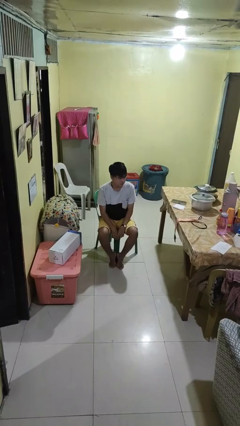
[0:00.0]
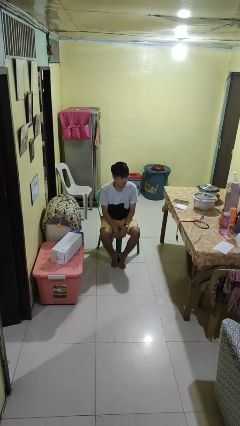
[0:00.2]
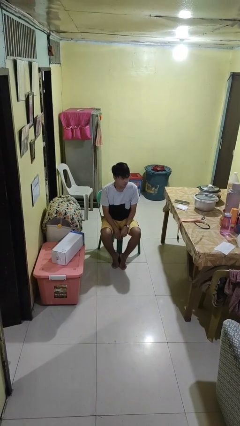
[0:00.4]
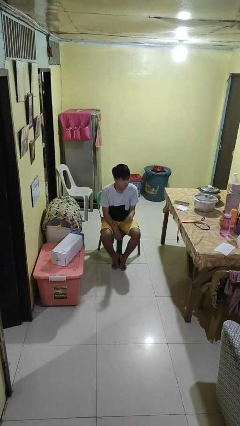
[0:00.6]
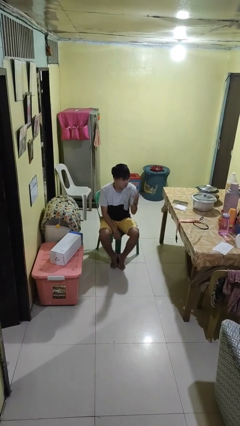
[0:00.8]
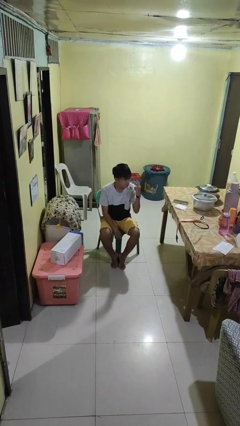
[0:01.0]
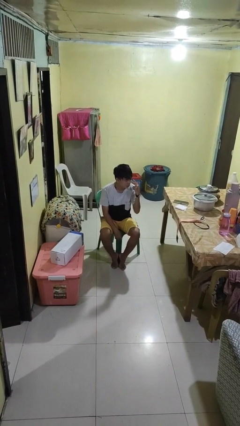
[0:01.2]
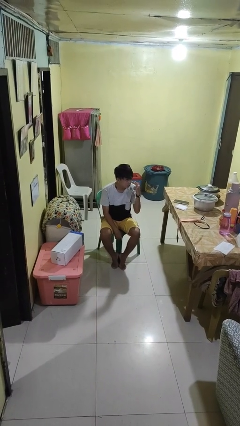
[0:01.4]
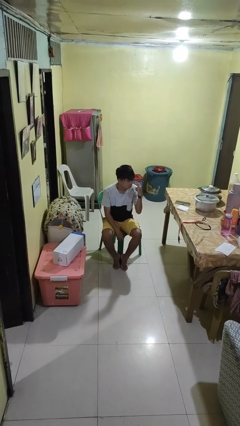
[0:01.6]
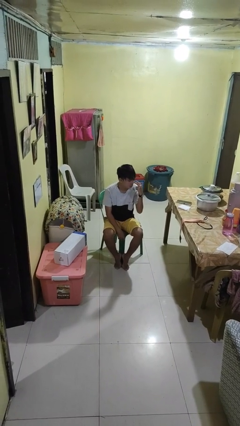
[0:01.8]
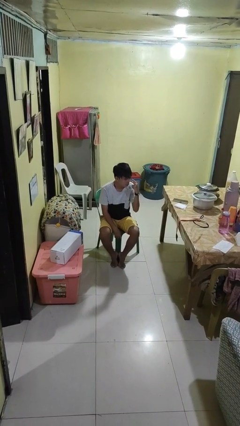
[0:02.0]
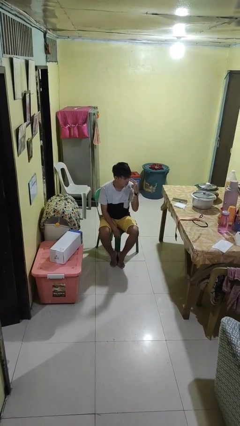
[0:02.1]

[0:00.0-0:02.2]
person gestures watch closely

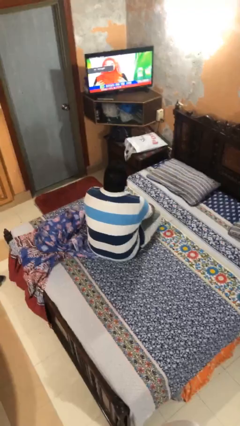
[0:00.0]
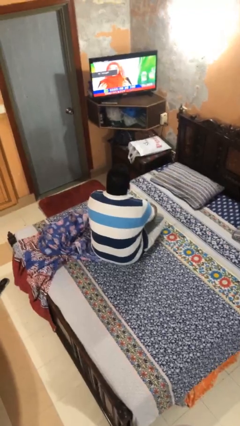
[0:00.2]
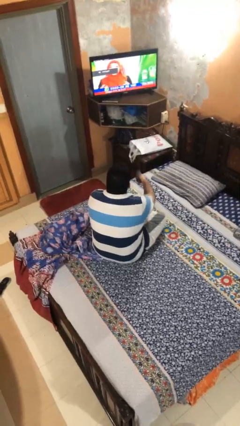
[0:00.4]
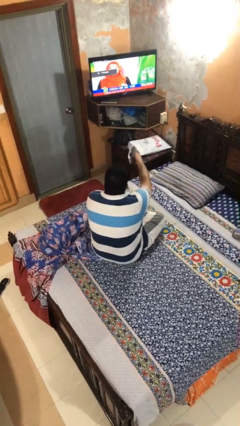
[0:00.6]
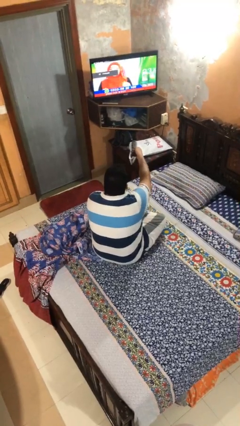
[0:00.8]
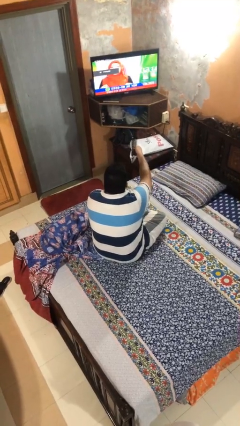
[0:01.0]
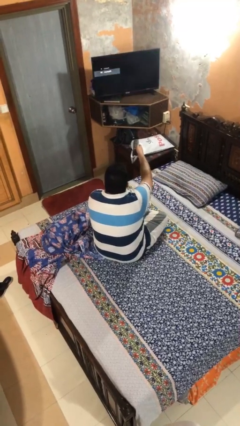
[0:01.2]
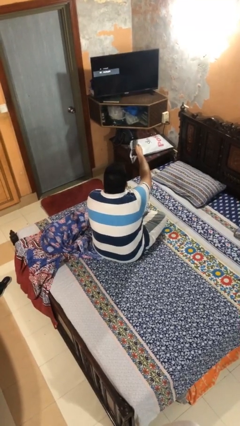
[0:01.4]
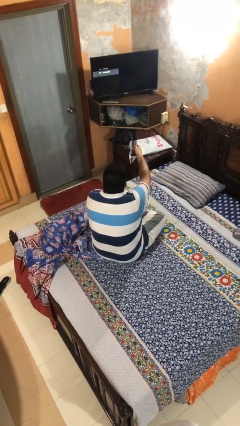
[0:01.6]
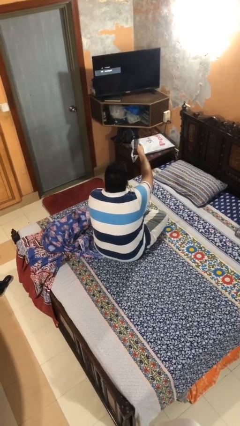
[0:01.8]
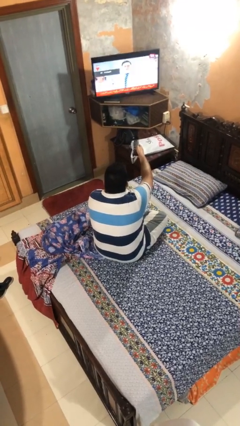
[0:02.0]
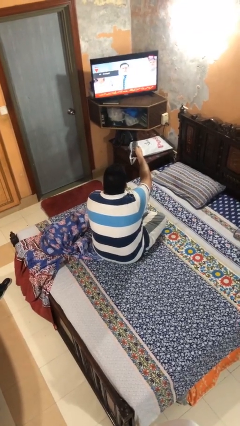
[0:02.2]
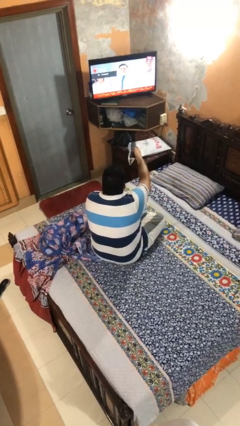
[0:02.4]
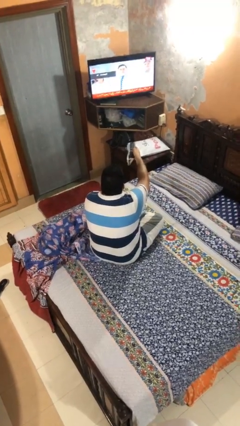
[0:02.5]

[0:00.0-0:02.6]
person uses television remote

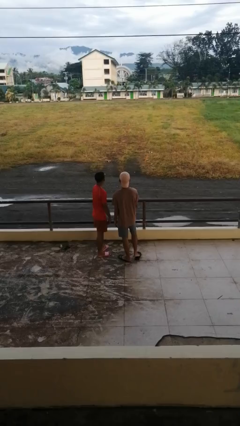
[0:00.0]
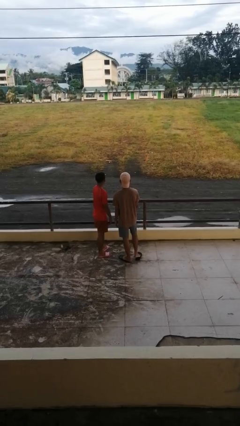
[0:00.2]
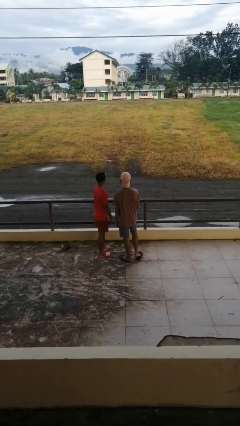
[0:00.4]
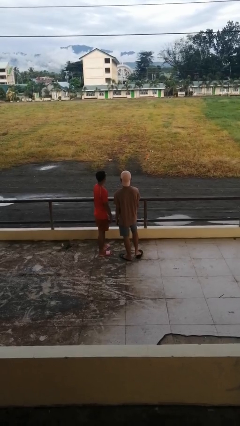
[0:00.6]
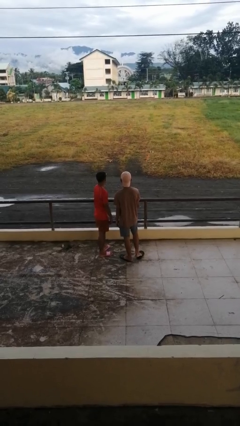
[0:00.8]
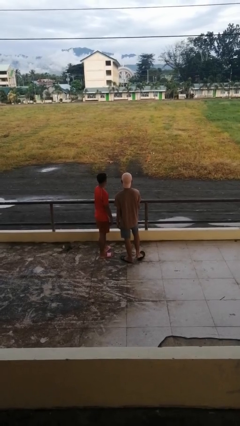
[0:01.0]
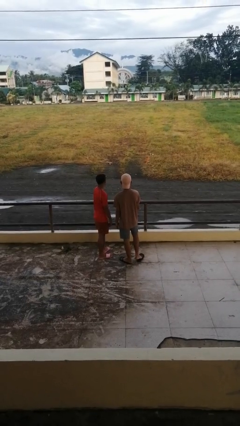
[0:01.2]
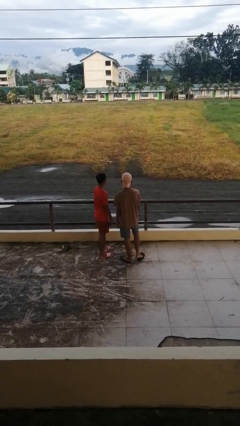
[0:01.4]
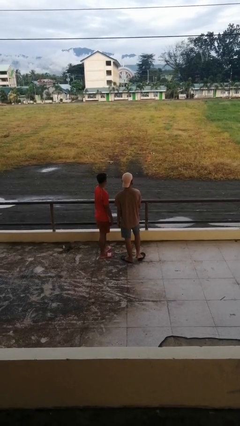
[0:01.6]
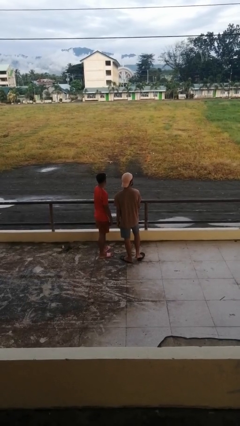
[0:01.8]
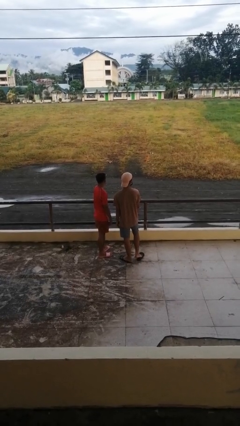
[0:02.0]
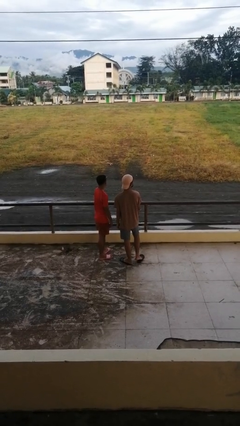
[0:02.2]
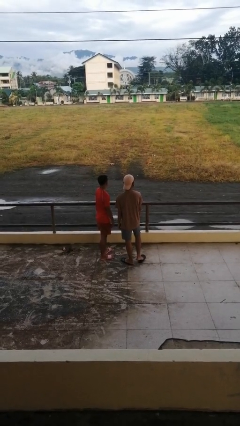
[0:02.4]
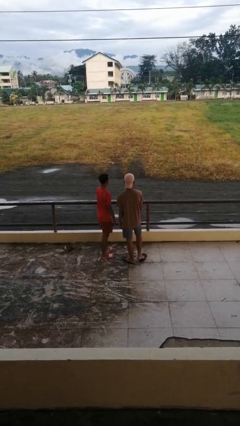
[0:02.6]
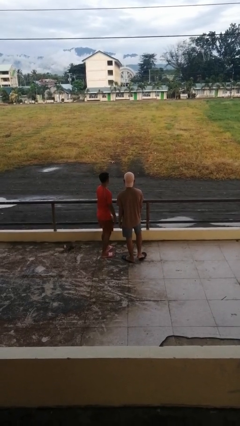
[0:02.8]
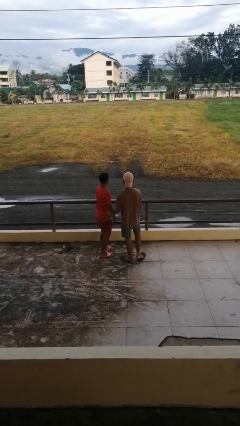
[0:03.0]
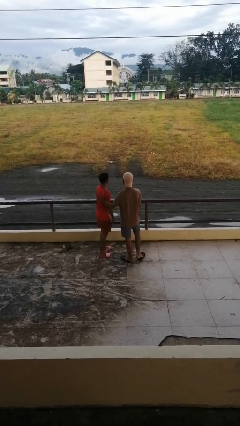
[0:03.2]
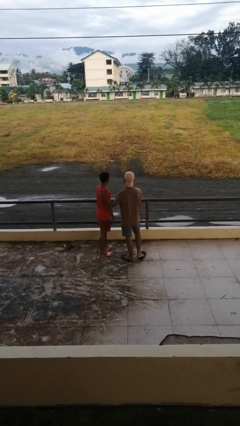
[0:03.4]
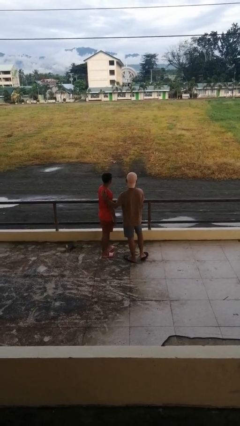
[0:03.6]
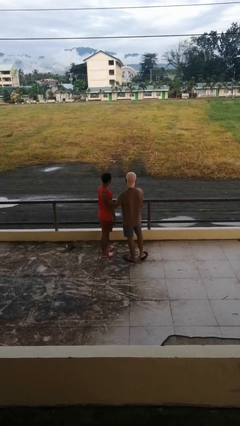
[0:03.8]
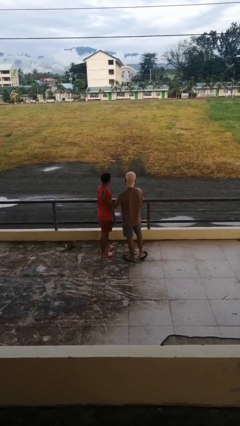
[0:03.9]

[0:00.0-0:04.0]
person touches back of person

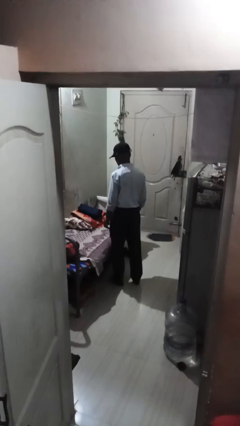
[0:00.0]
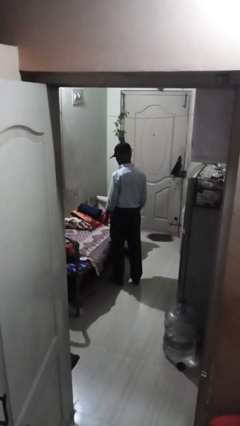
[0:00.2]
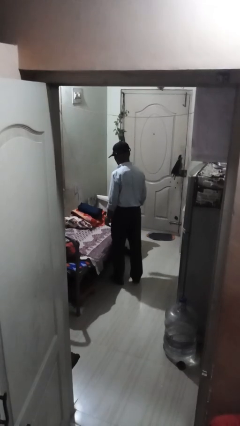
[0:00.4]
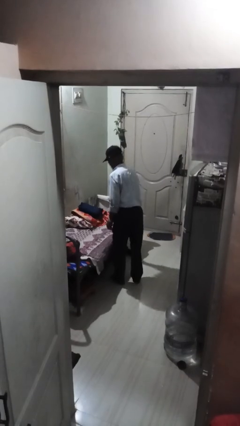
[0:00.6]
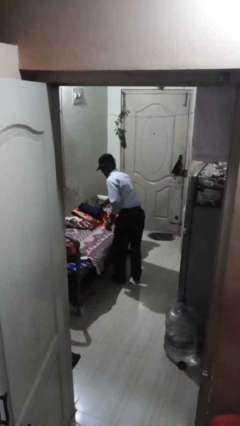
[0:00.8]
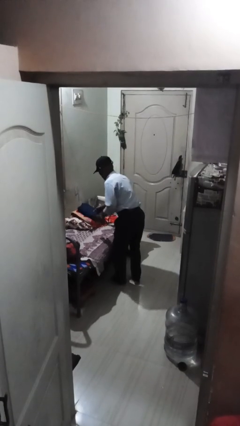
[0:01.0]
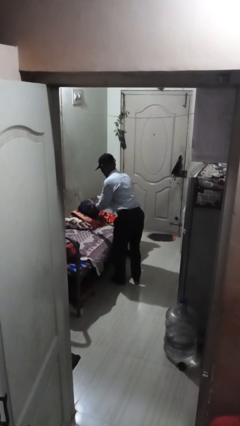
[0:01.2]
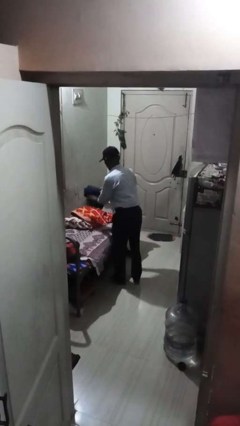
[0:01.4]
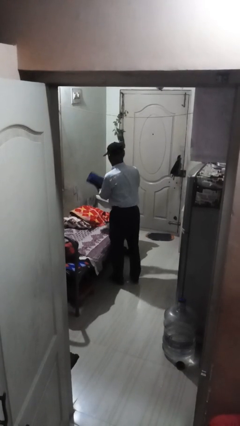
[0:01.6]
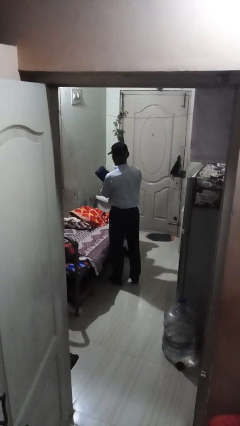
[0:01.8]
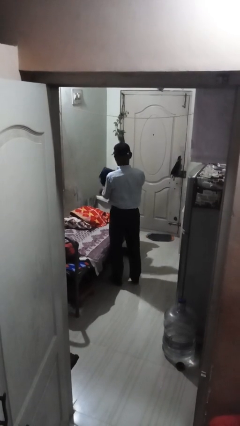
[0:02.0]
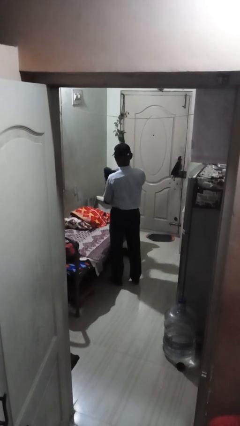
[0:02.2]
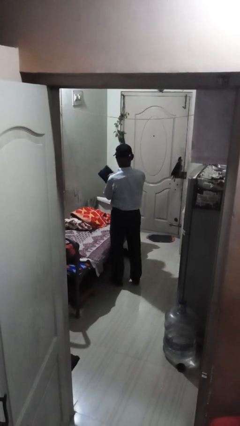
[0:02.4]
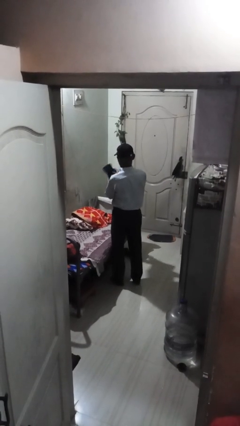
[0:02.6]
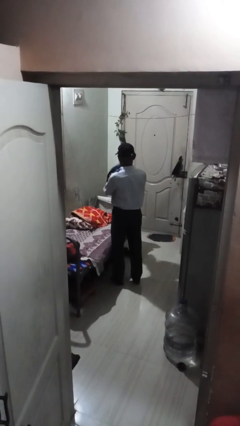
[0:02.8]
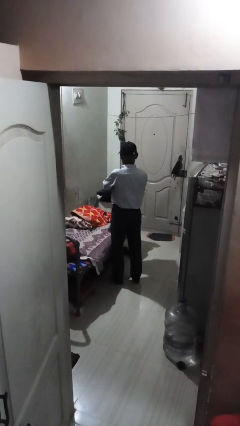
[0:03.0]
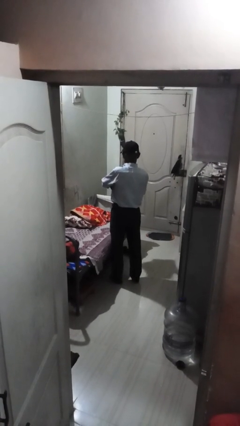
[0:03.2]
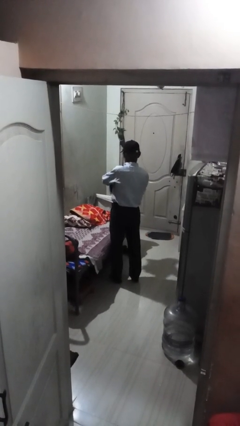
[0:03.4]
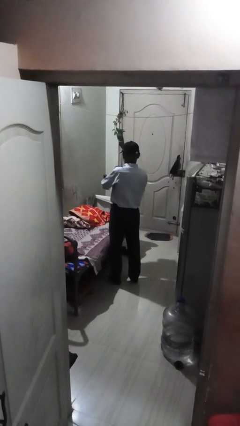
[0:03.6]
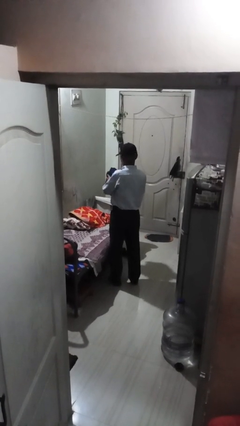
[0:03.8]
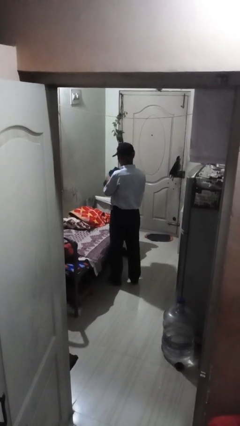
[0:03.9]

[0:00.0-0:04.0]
person folds pants

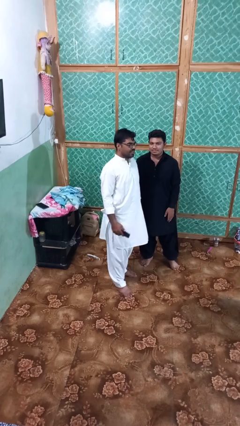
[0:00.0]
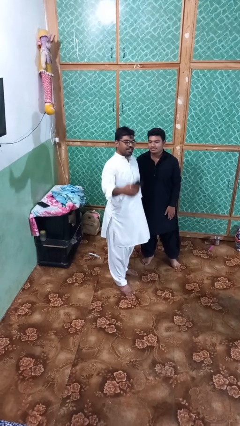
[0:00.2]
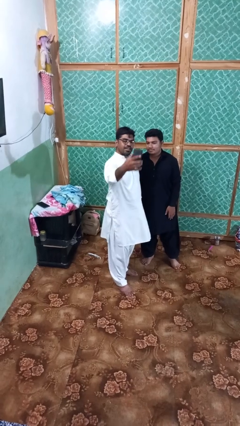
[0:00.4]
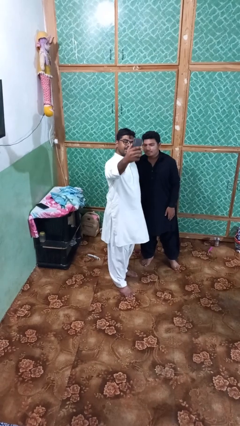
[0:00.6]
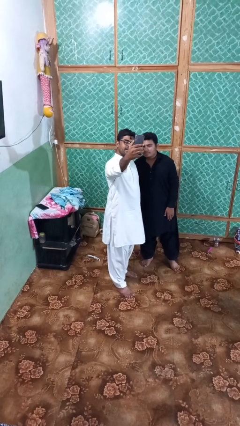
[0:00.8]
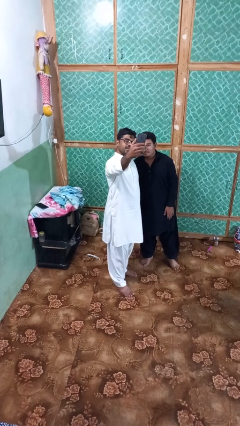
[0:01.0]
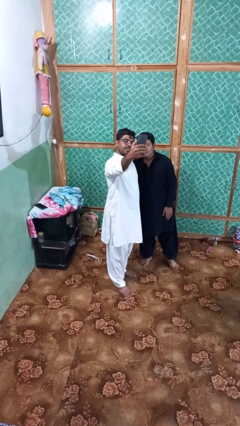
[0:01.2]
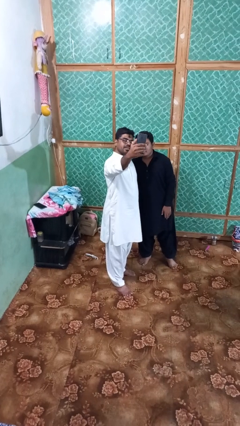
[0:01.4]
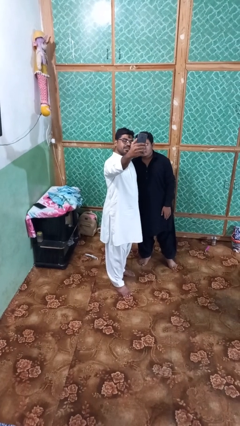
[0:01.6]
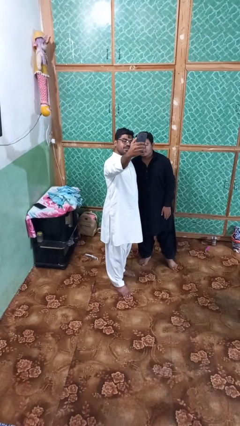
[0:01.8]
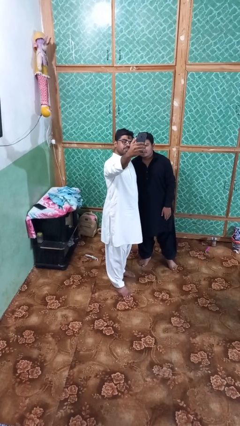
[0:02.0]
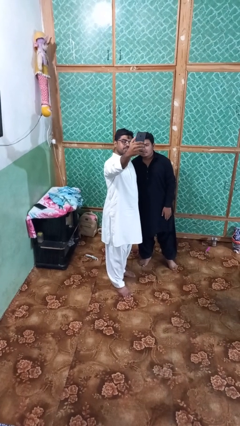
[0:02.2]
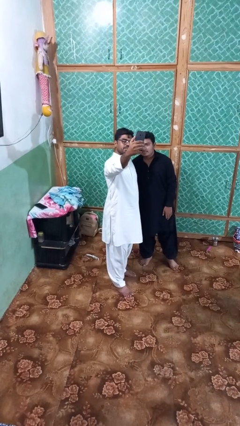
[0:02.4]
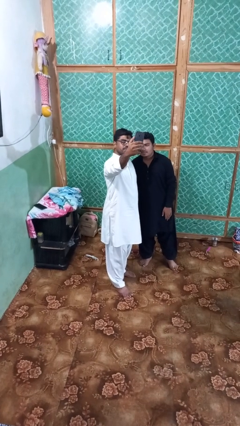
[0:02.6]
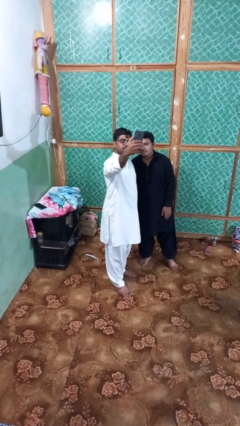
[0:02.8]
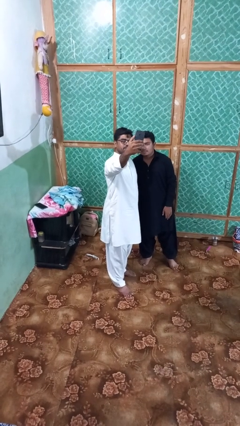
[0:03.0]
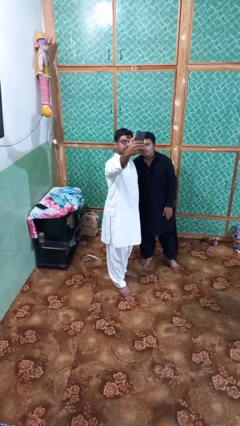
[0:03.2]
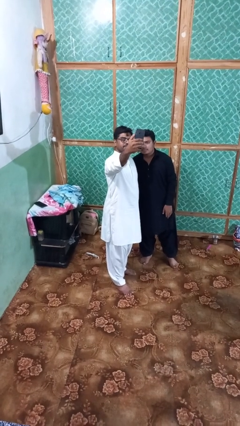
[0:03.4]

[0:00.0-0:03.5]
person takes selfie with person

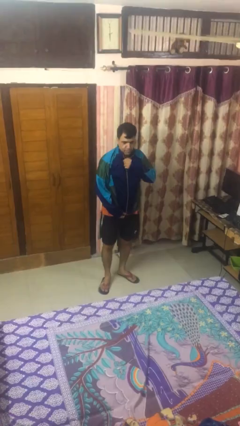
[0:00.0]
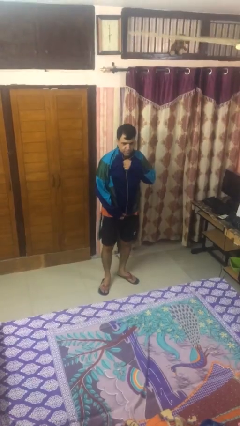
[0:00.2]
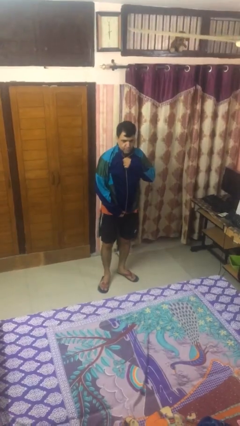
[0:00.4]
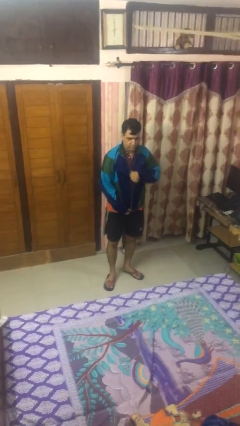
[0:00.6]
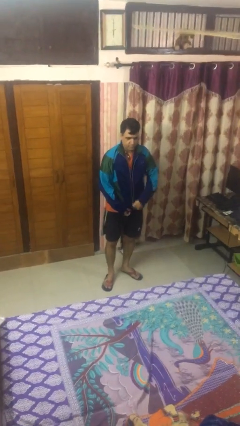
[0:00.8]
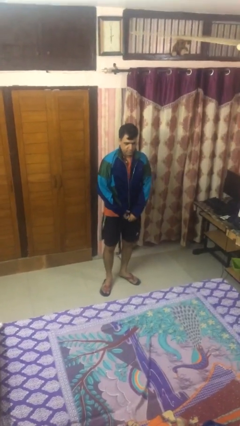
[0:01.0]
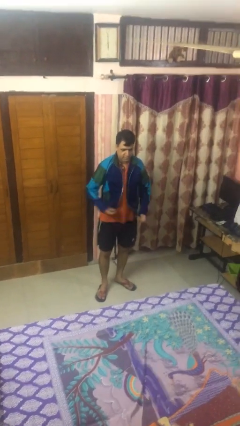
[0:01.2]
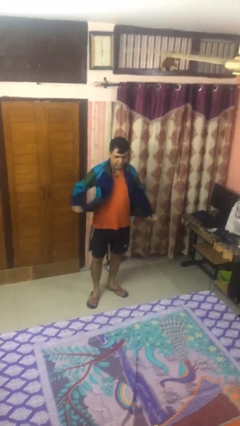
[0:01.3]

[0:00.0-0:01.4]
person unzips jacket
